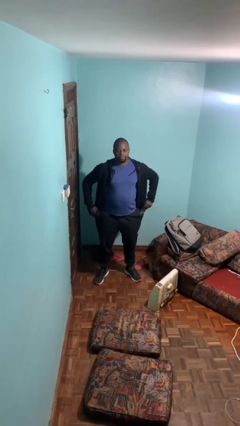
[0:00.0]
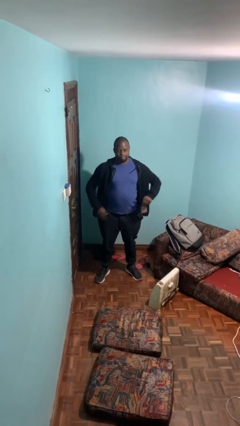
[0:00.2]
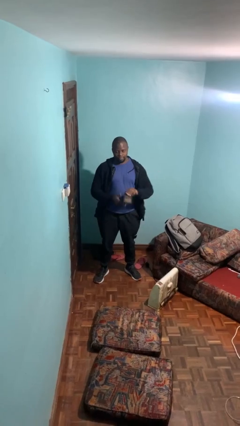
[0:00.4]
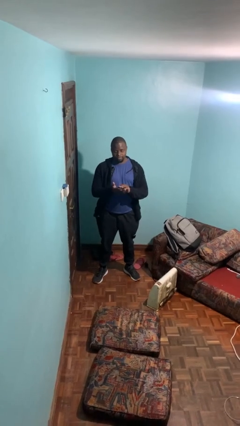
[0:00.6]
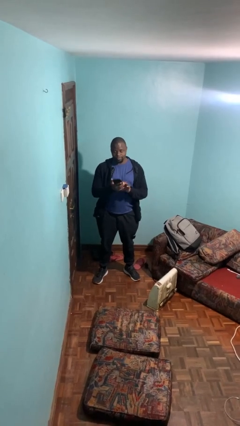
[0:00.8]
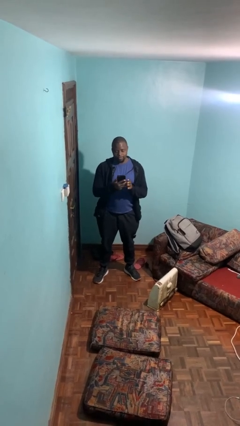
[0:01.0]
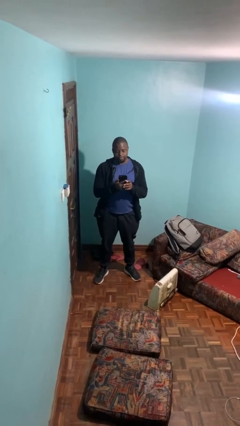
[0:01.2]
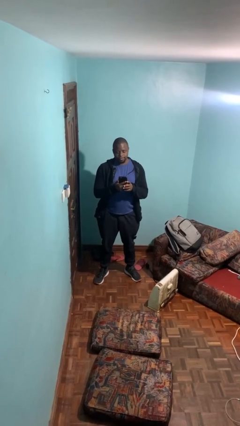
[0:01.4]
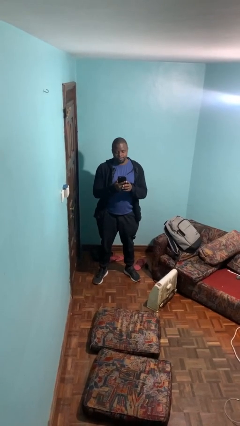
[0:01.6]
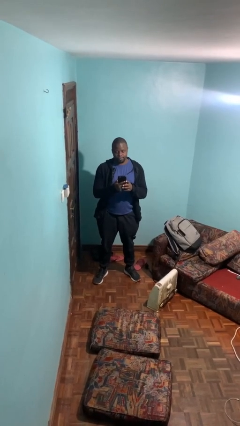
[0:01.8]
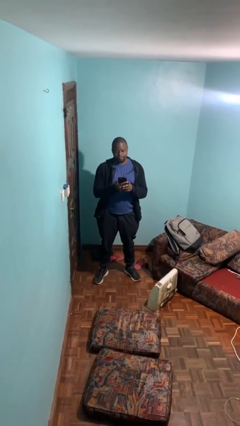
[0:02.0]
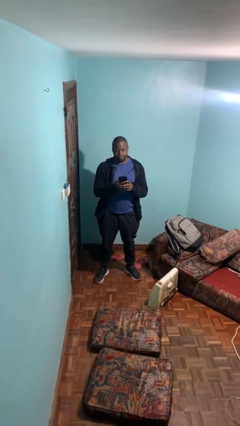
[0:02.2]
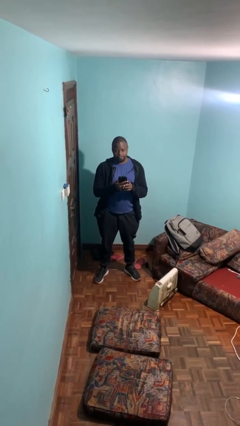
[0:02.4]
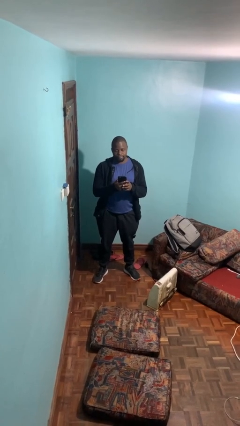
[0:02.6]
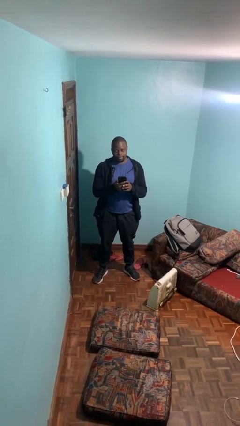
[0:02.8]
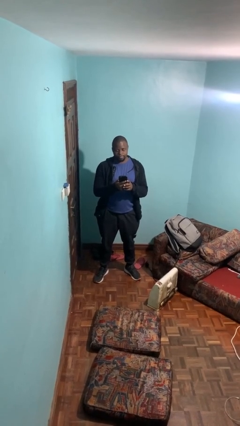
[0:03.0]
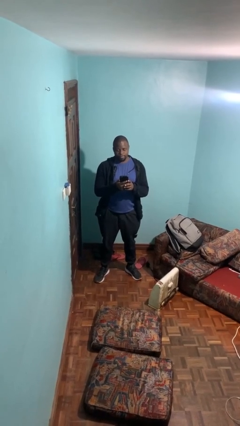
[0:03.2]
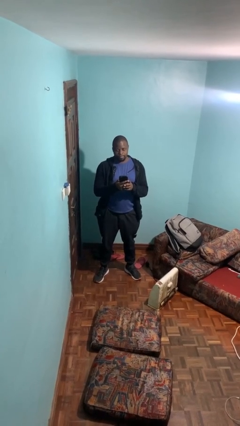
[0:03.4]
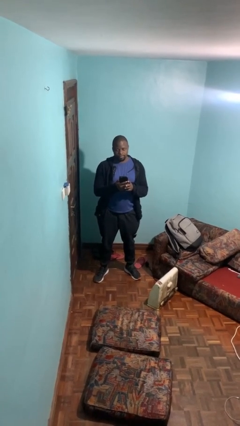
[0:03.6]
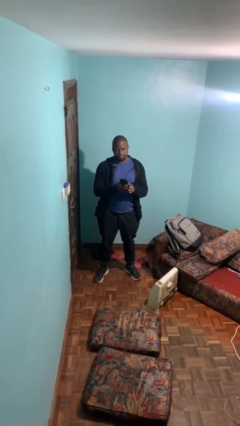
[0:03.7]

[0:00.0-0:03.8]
person takes phone from pocket

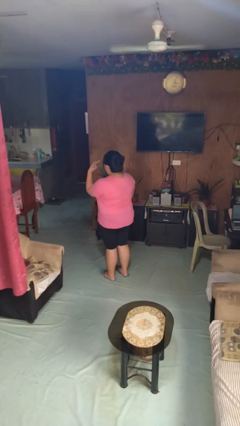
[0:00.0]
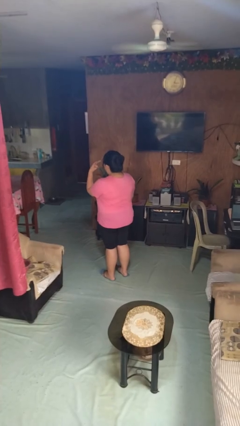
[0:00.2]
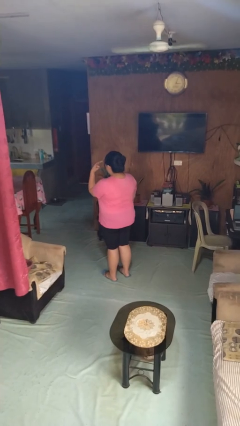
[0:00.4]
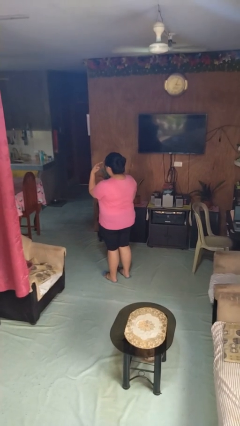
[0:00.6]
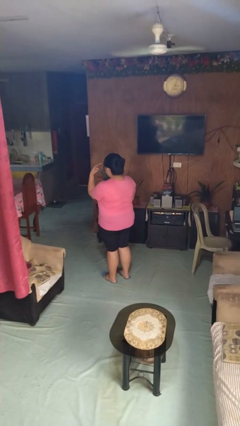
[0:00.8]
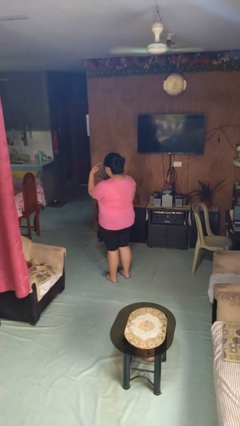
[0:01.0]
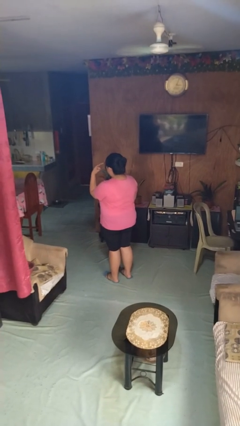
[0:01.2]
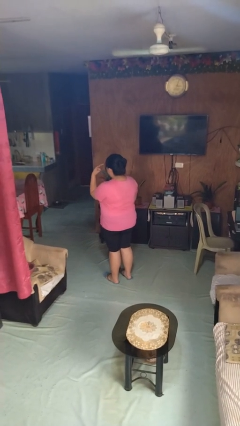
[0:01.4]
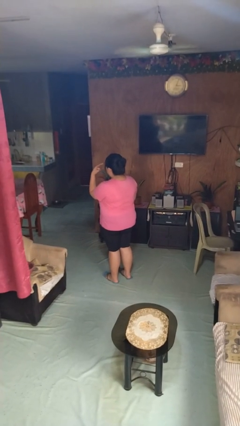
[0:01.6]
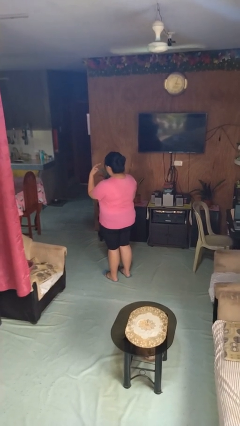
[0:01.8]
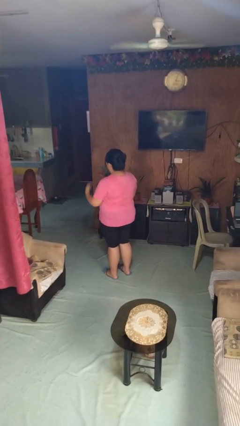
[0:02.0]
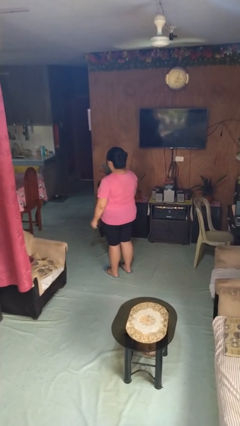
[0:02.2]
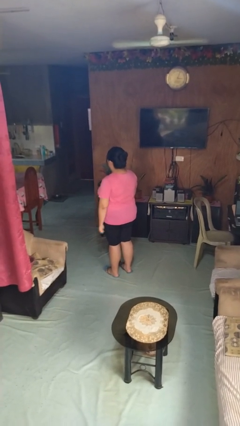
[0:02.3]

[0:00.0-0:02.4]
person gestures watch closely

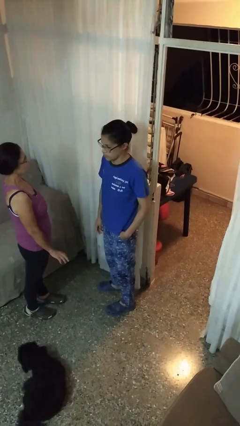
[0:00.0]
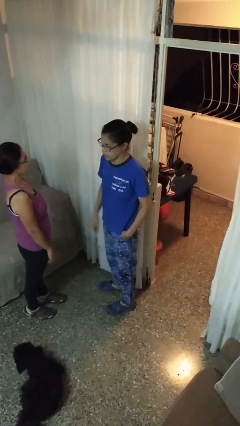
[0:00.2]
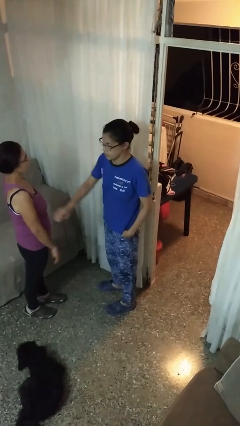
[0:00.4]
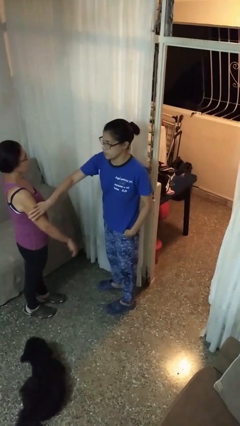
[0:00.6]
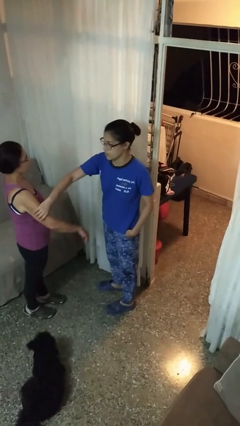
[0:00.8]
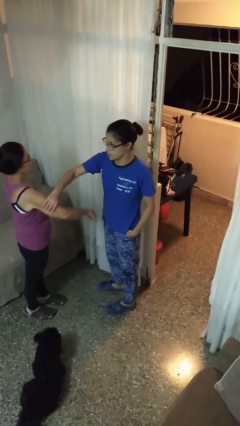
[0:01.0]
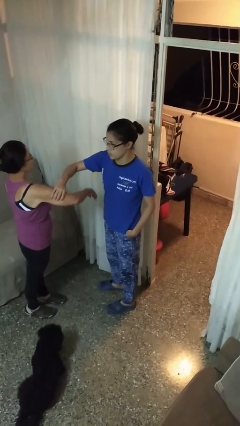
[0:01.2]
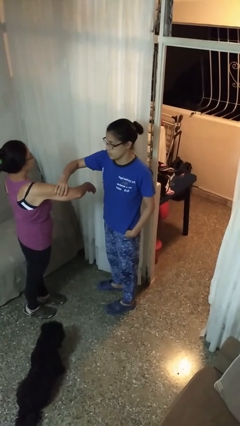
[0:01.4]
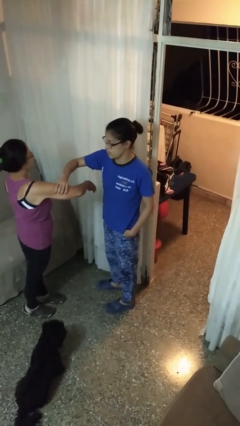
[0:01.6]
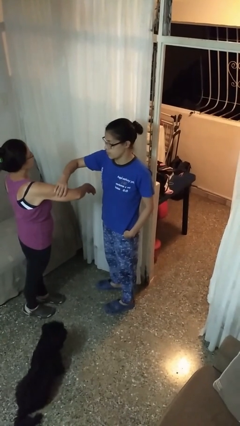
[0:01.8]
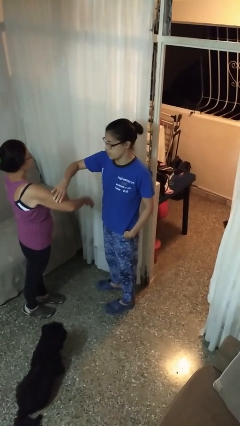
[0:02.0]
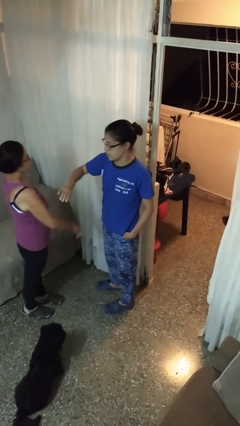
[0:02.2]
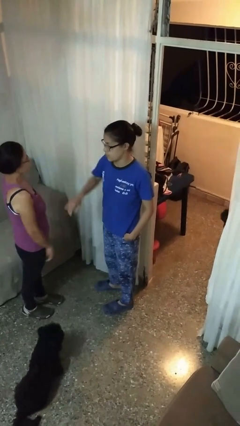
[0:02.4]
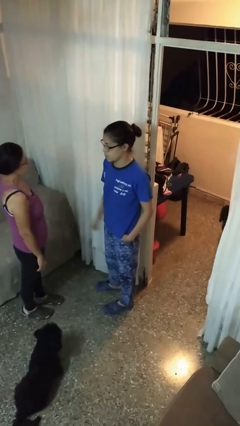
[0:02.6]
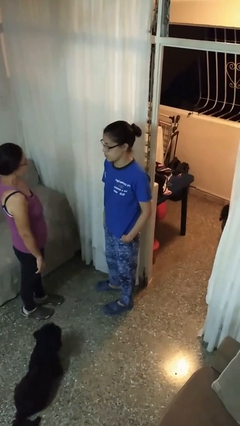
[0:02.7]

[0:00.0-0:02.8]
person grabs person by bicep

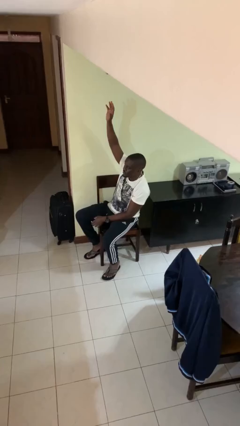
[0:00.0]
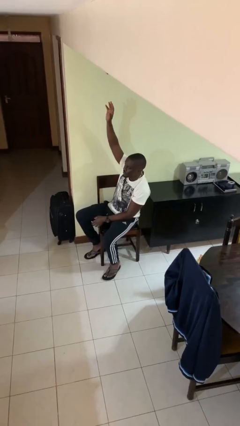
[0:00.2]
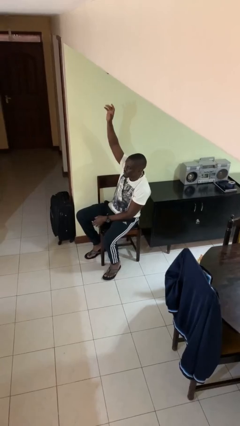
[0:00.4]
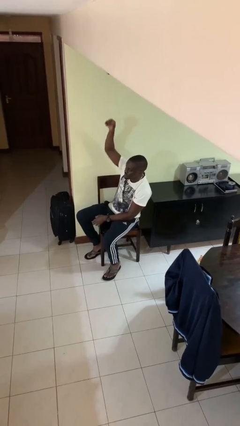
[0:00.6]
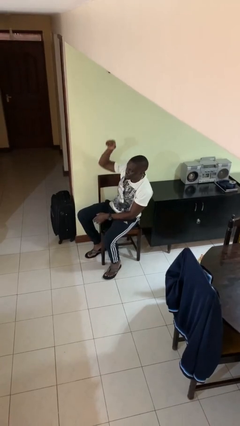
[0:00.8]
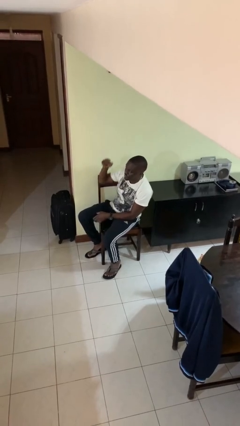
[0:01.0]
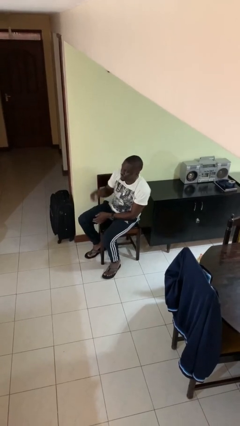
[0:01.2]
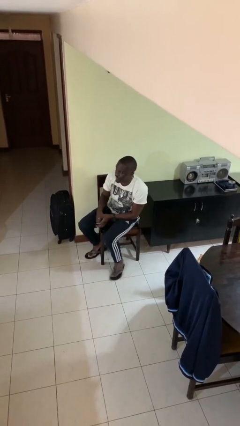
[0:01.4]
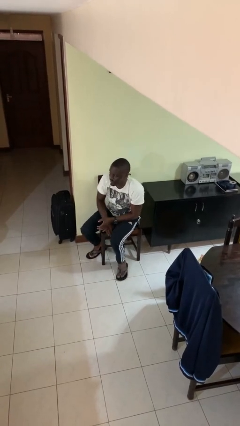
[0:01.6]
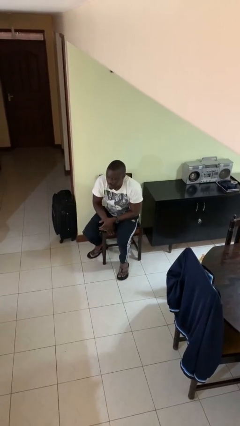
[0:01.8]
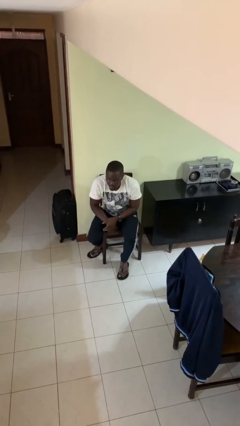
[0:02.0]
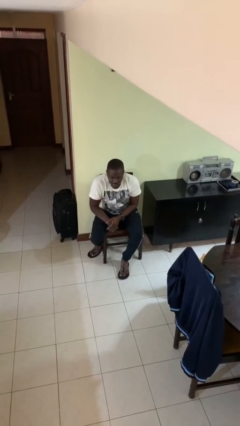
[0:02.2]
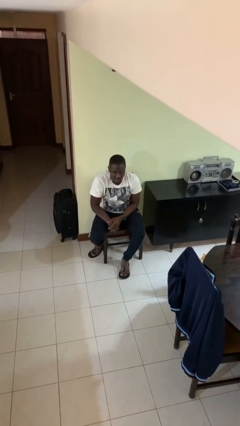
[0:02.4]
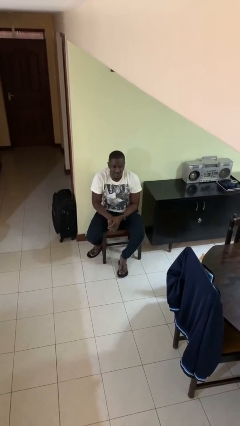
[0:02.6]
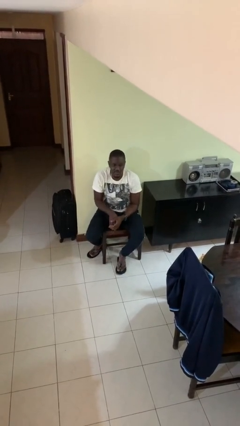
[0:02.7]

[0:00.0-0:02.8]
person gestures lower hand

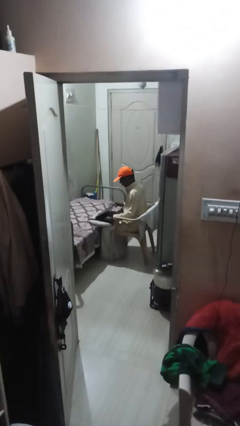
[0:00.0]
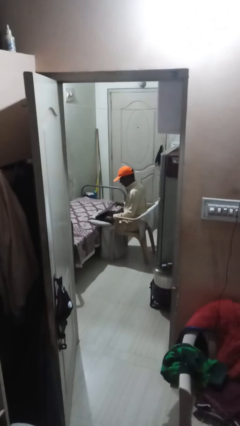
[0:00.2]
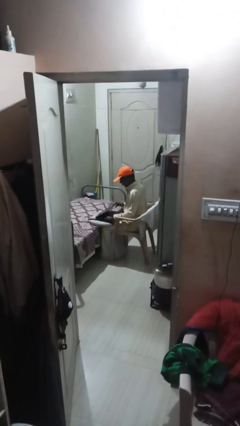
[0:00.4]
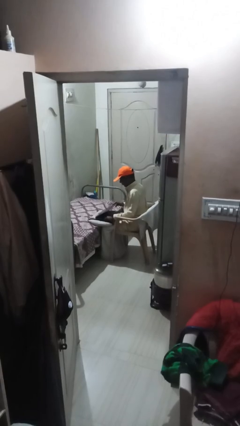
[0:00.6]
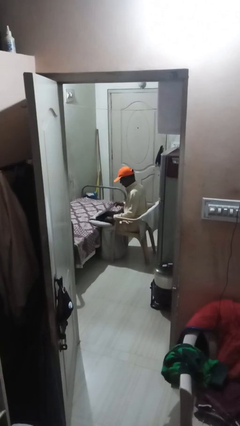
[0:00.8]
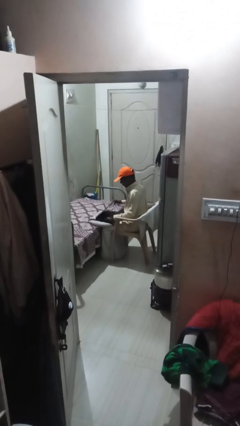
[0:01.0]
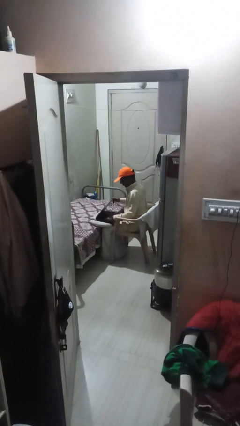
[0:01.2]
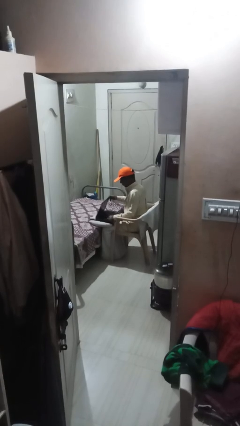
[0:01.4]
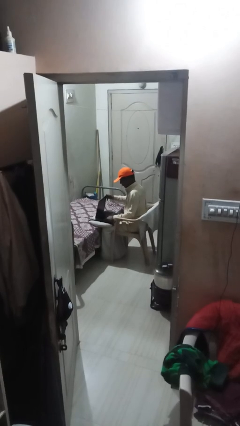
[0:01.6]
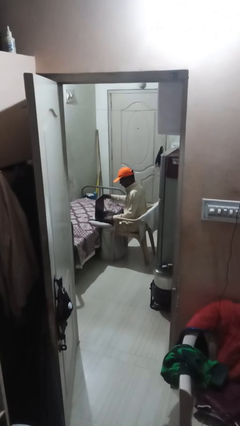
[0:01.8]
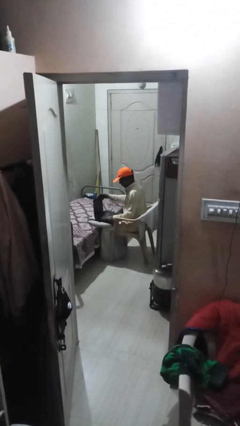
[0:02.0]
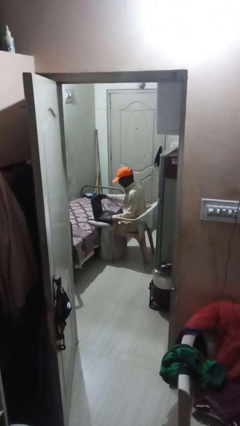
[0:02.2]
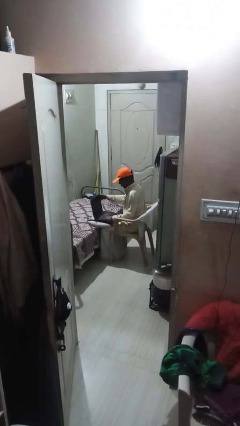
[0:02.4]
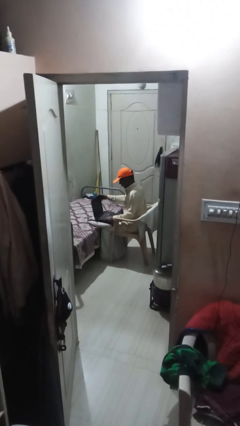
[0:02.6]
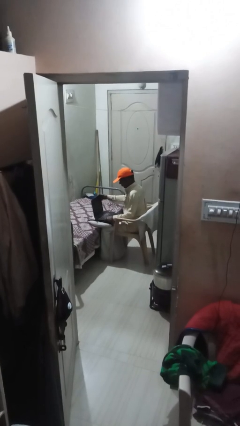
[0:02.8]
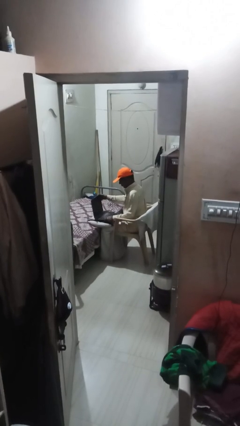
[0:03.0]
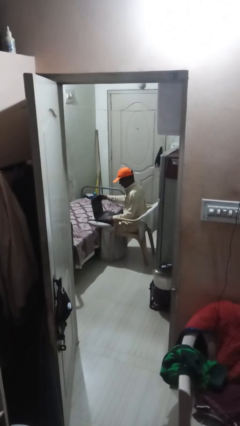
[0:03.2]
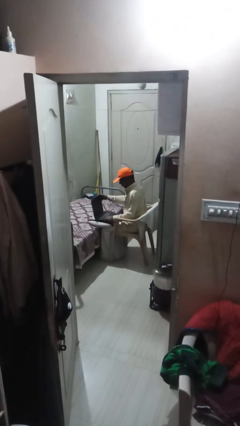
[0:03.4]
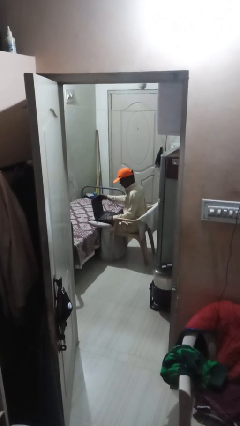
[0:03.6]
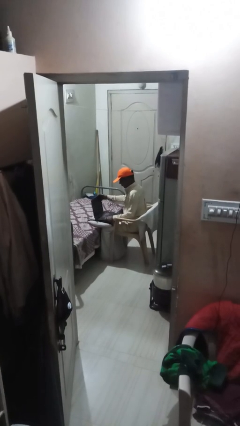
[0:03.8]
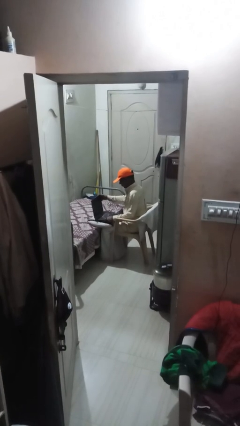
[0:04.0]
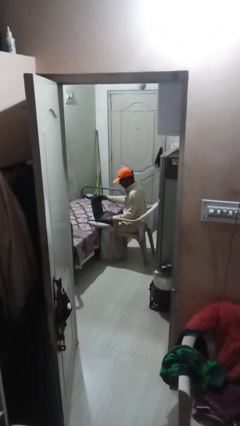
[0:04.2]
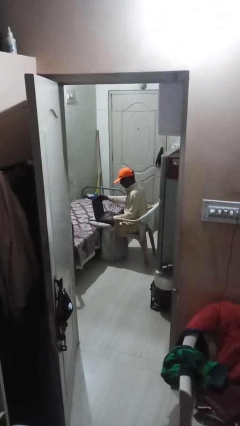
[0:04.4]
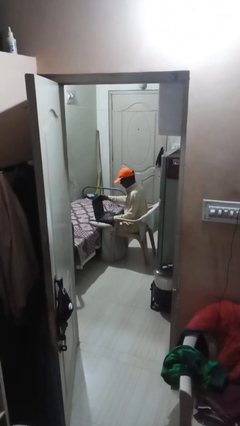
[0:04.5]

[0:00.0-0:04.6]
person interacts with laptop

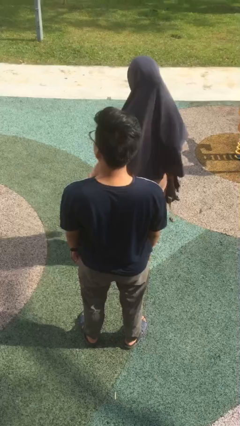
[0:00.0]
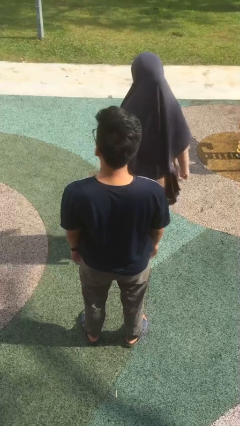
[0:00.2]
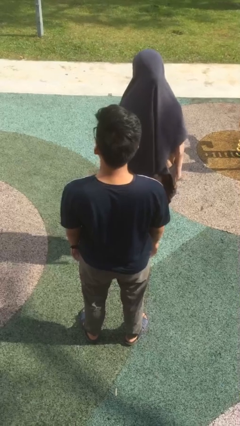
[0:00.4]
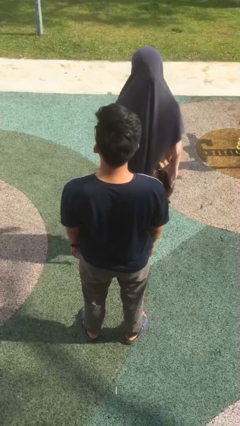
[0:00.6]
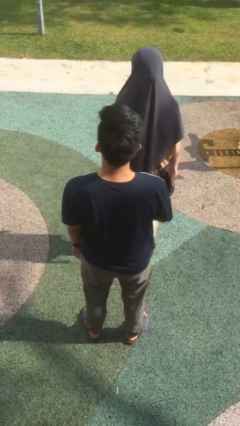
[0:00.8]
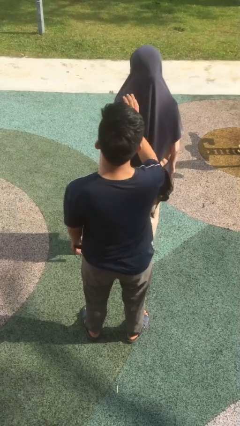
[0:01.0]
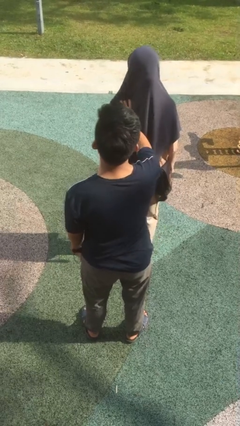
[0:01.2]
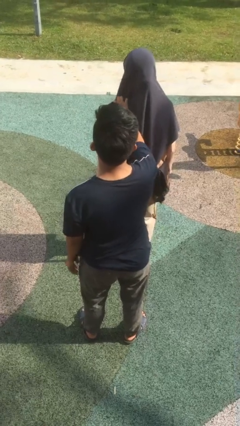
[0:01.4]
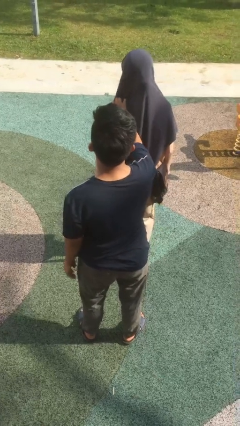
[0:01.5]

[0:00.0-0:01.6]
person grabs person by shoulder
